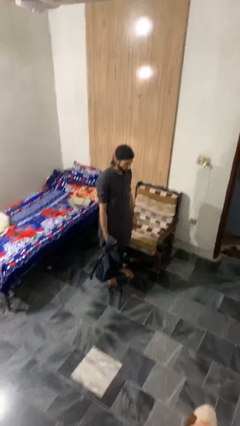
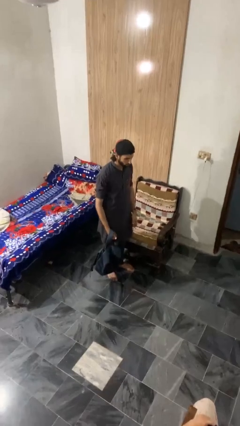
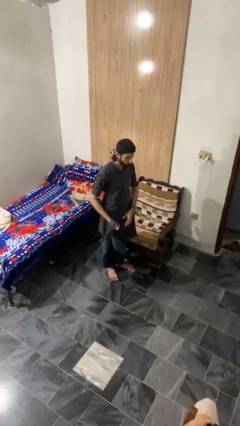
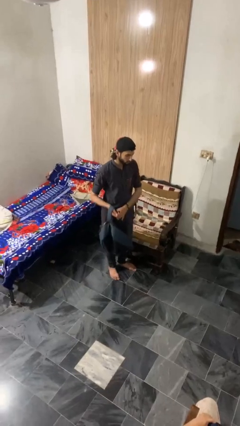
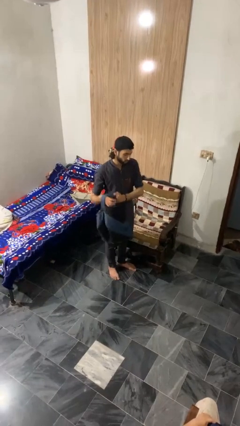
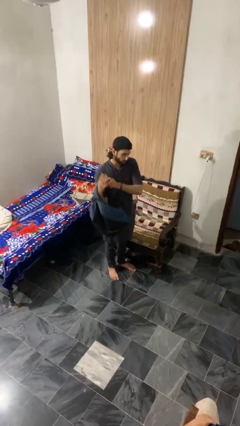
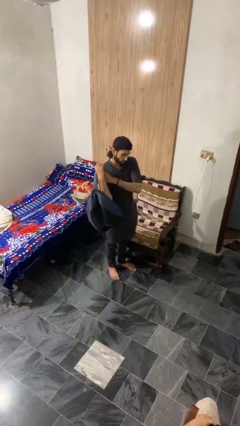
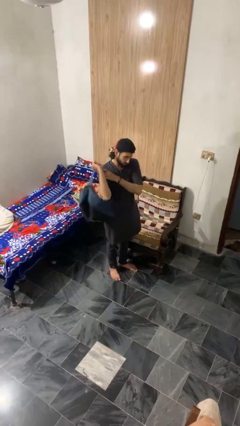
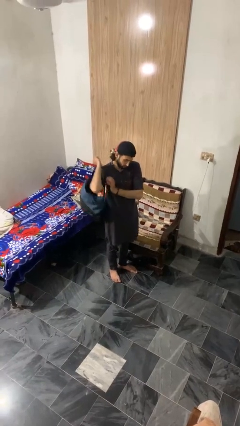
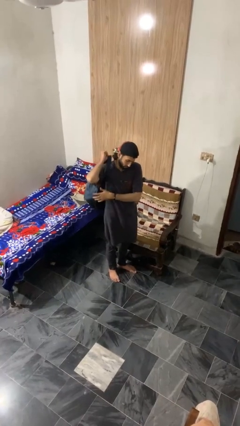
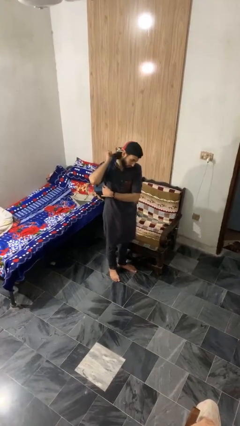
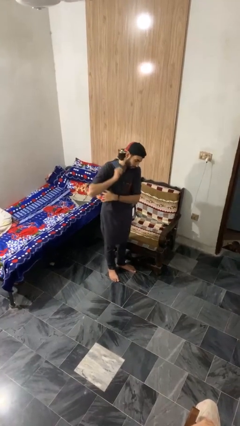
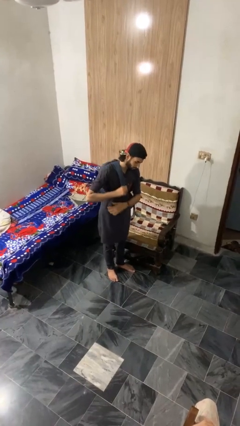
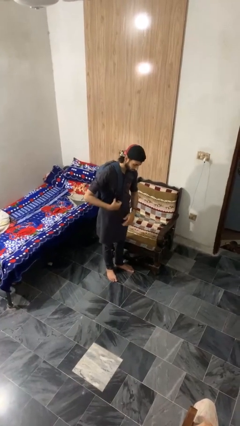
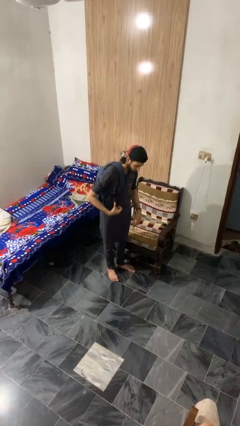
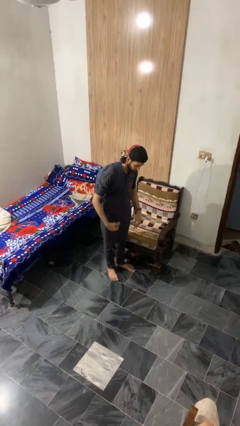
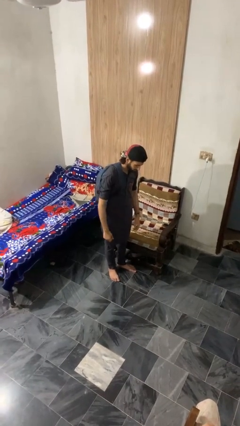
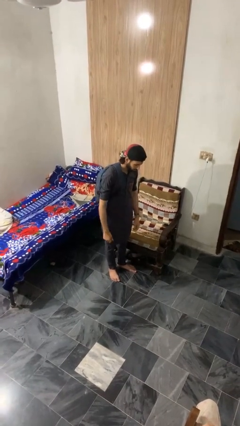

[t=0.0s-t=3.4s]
person puts on backpack

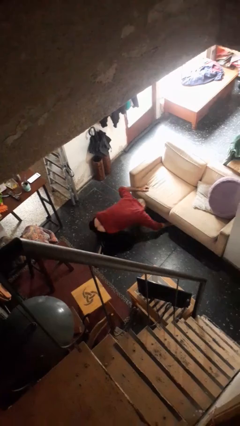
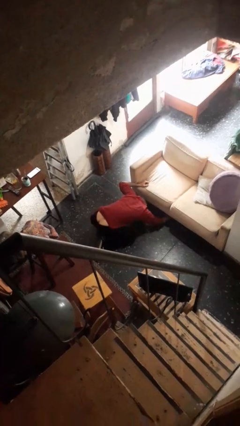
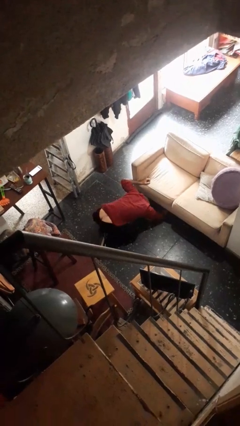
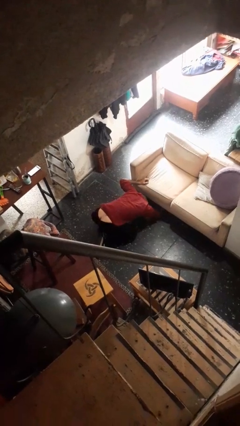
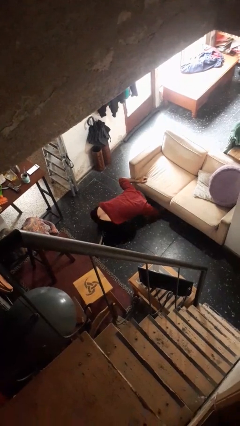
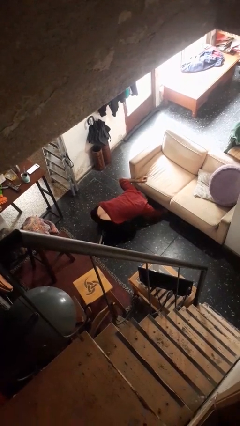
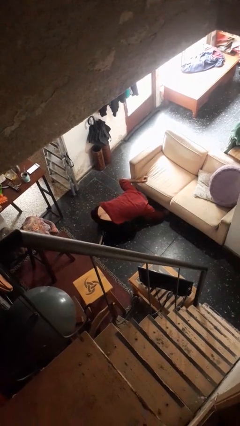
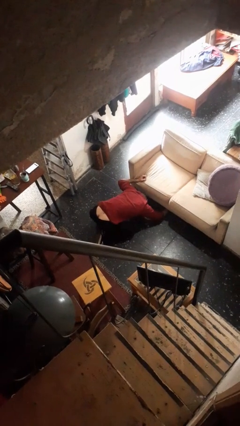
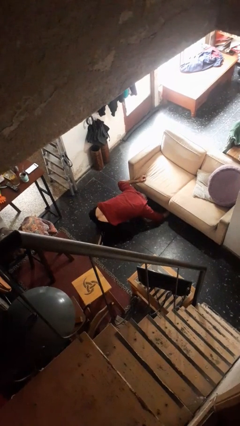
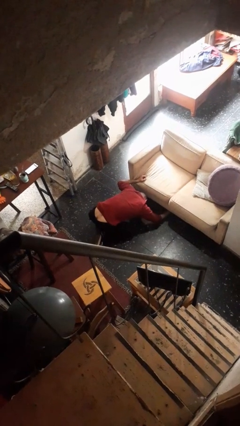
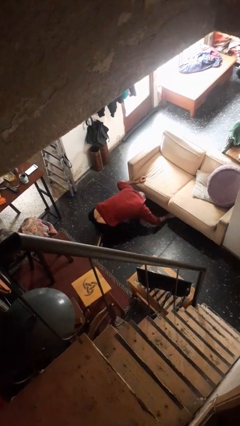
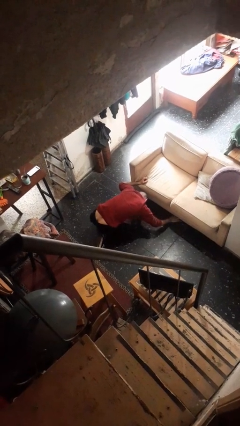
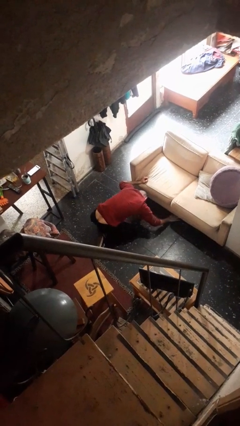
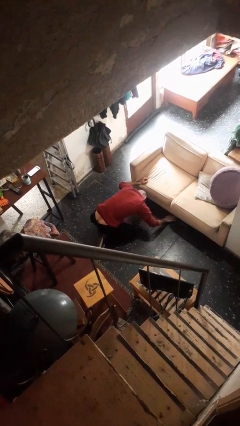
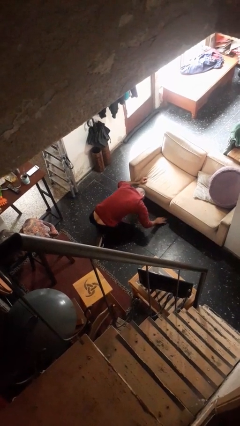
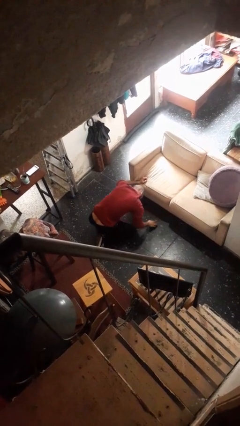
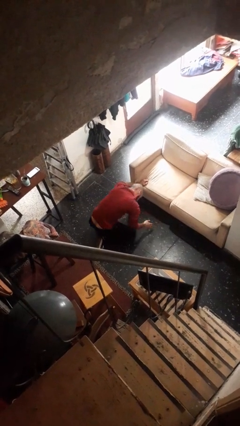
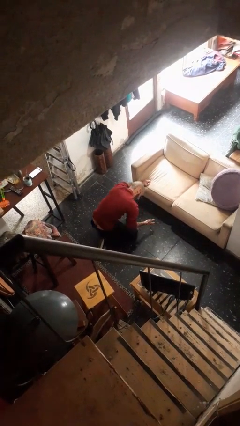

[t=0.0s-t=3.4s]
person searches under couch

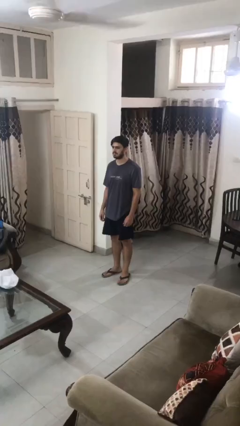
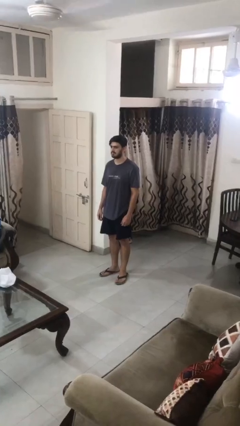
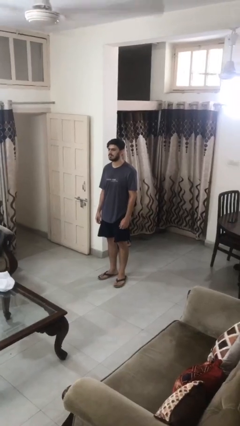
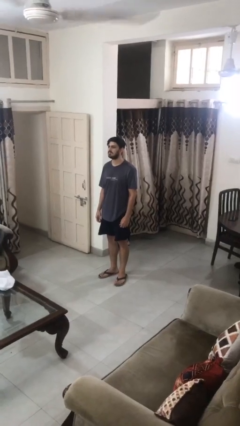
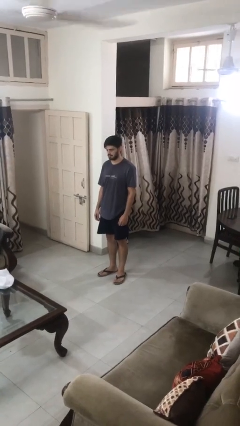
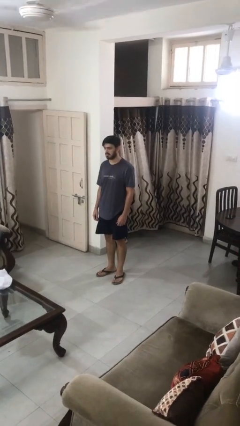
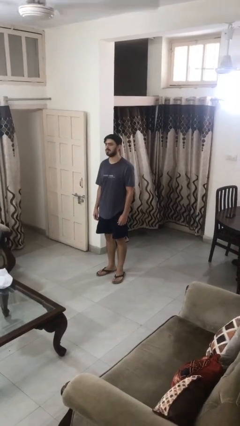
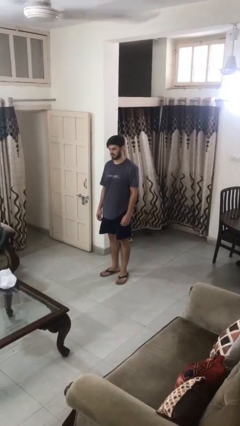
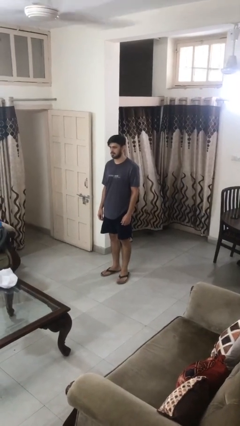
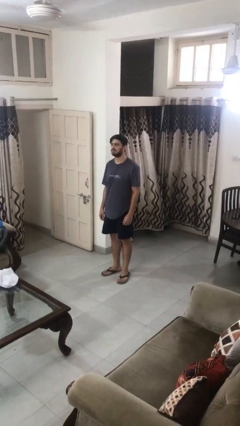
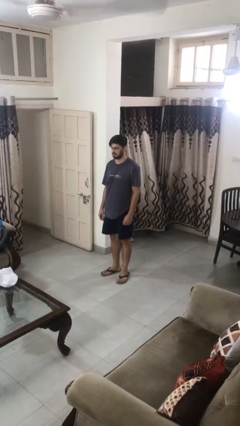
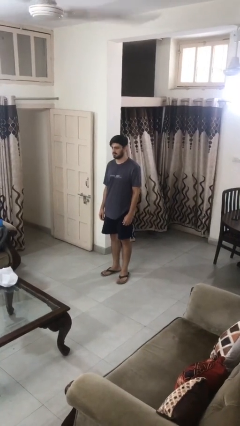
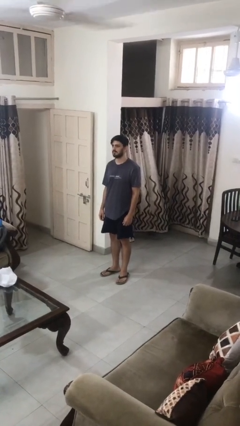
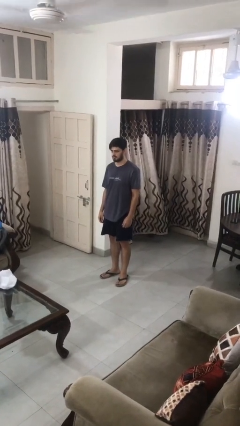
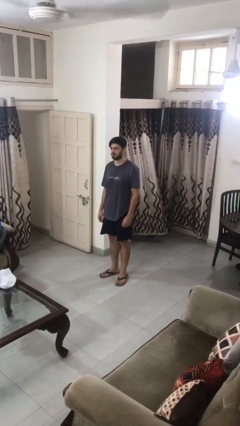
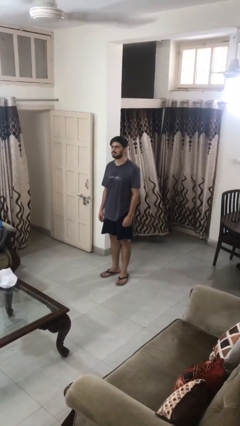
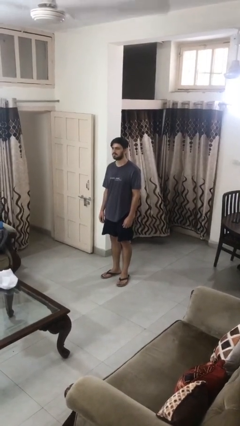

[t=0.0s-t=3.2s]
person nods head

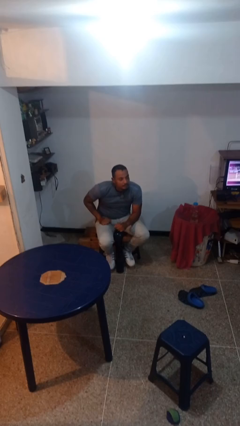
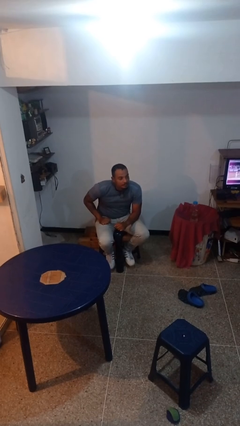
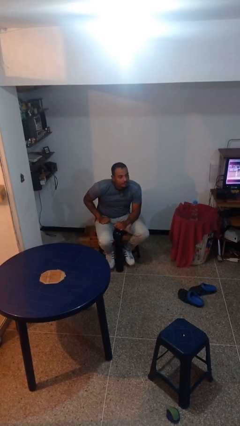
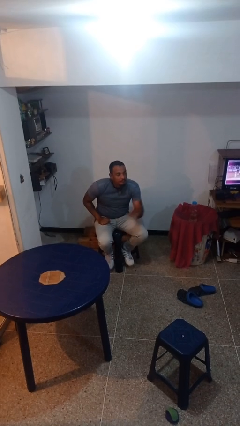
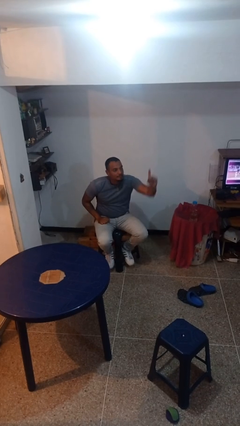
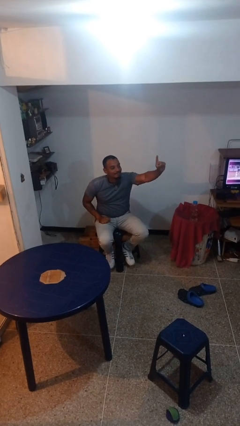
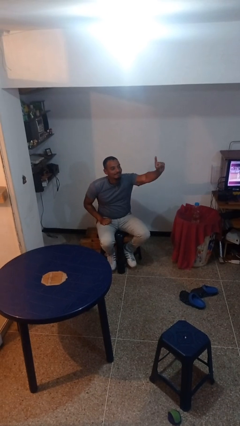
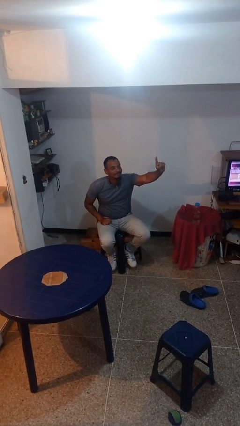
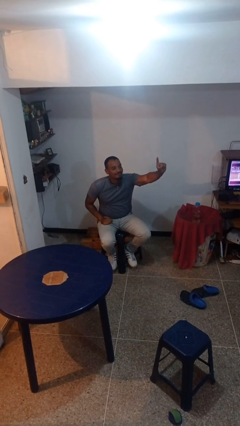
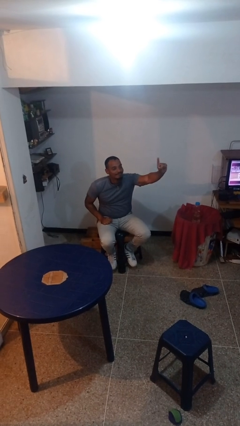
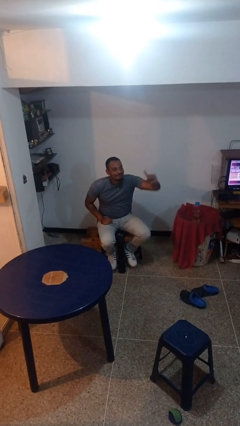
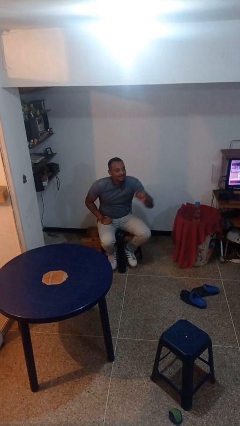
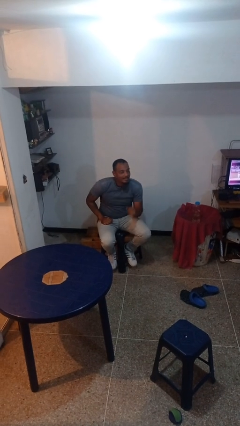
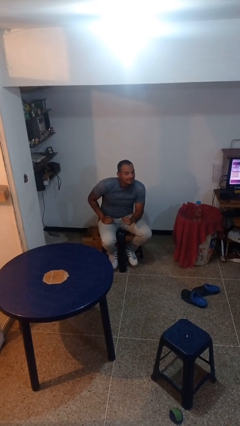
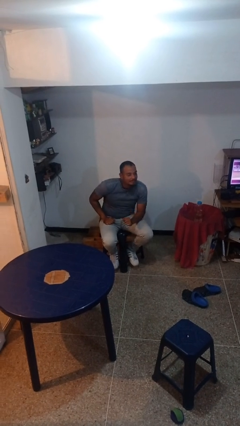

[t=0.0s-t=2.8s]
person gestures number one

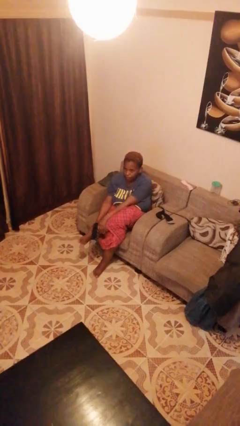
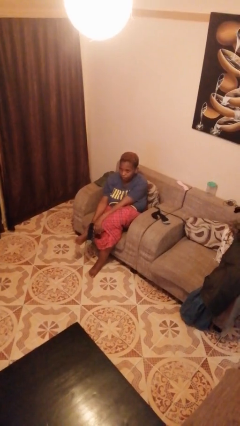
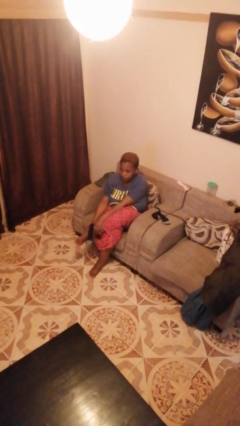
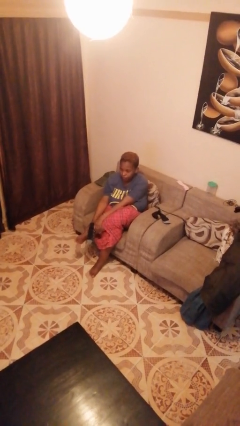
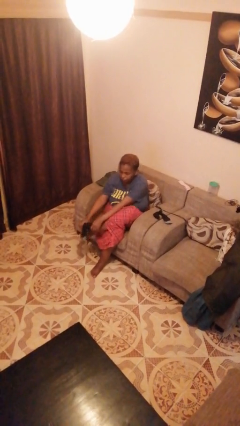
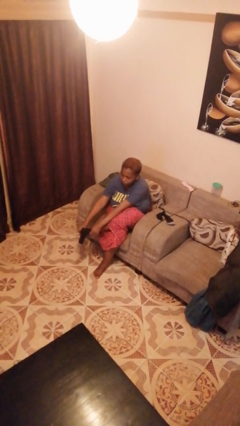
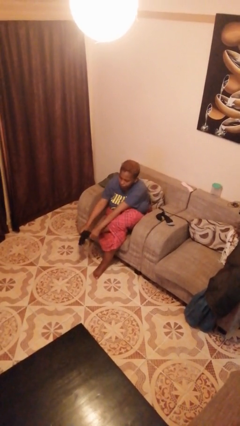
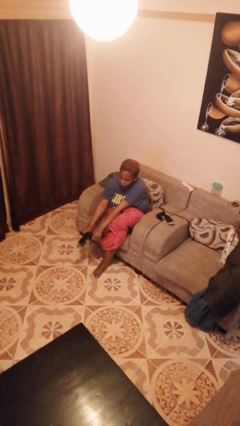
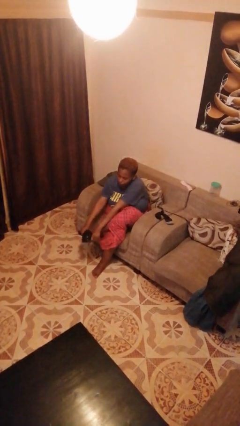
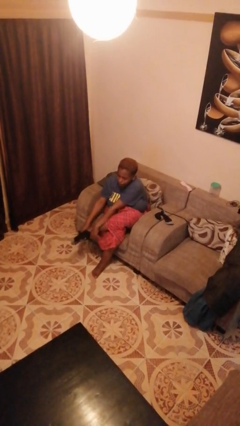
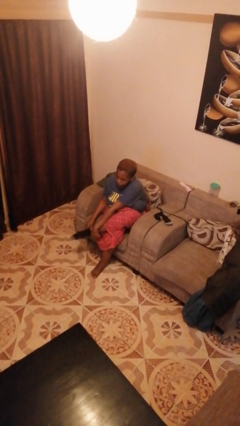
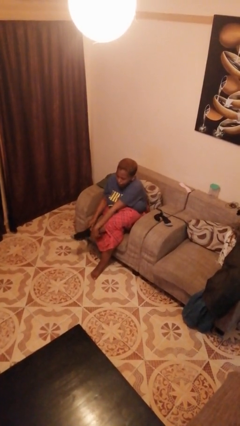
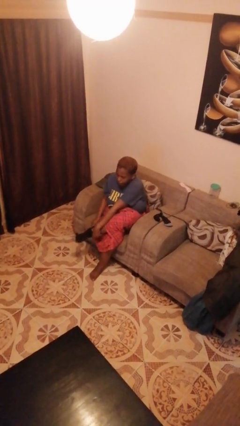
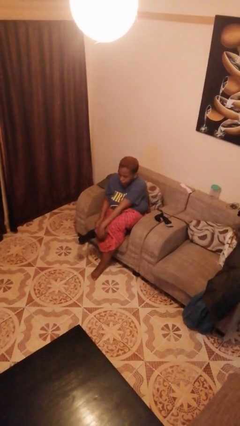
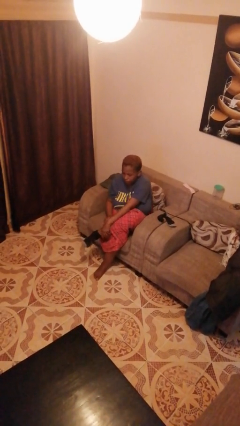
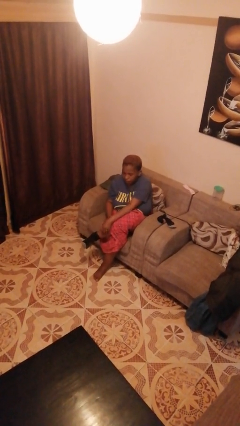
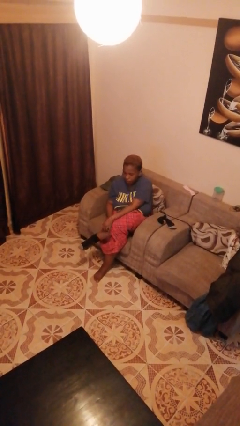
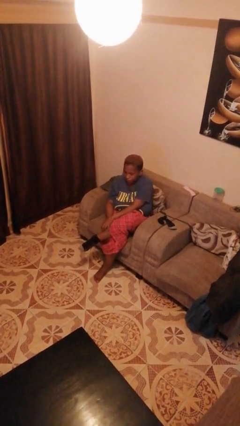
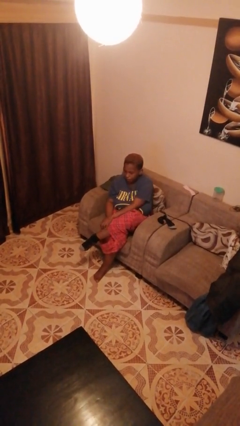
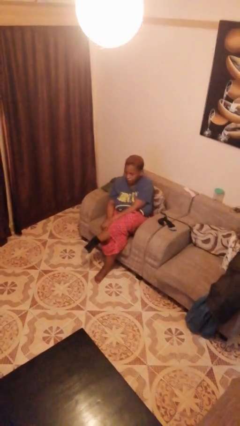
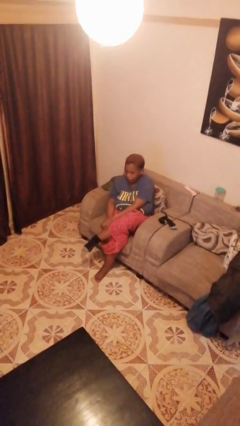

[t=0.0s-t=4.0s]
person puts on socks

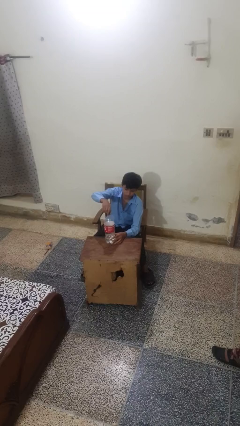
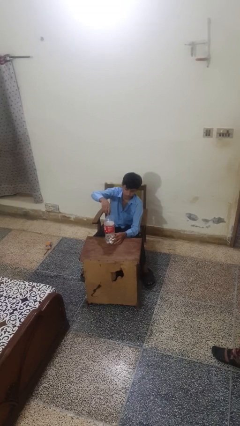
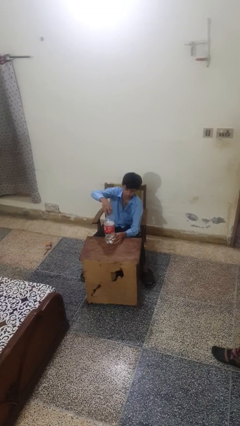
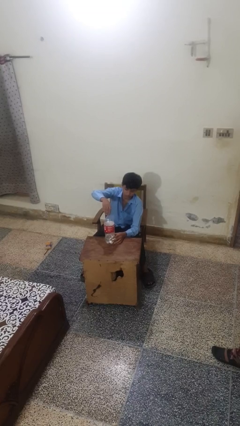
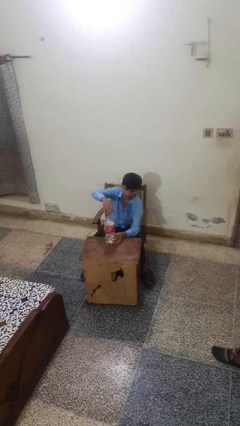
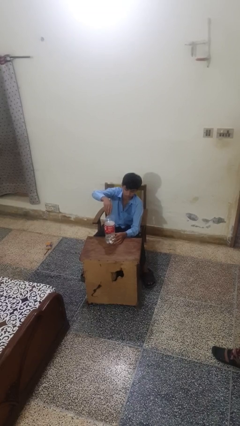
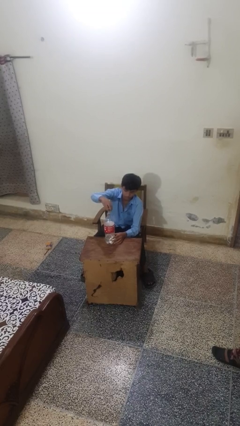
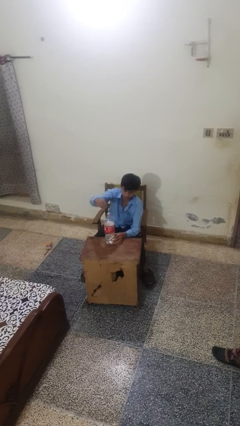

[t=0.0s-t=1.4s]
person unscrews lid from bottle
